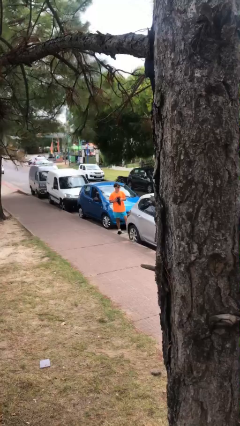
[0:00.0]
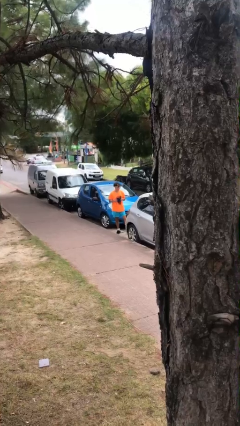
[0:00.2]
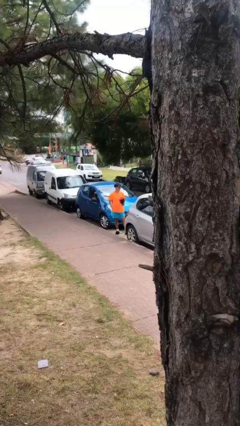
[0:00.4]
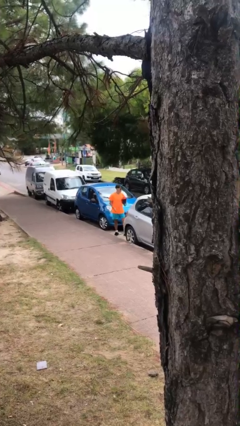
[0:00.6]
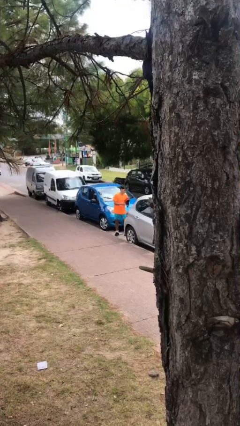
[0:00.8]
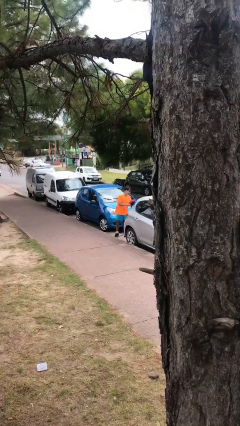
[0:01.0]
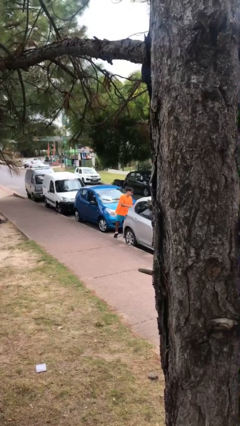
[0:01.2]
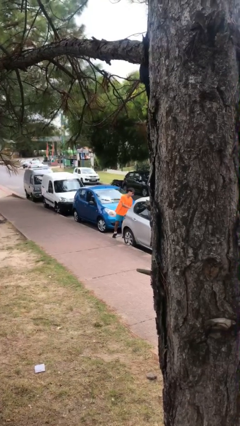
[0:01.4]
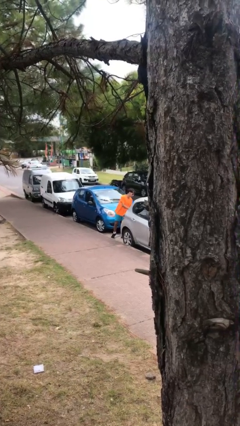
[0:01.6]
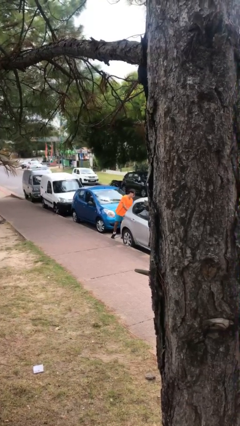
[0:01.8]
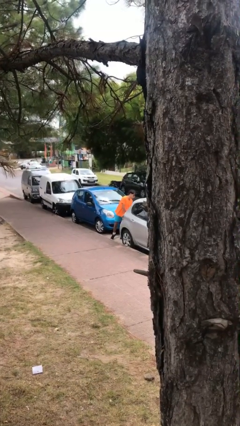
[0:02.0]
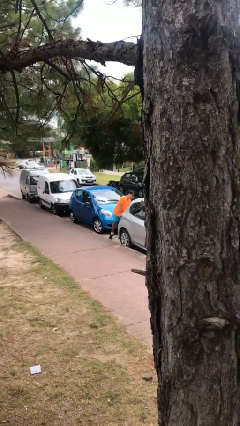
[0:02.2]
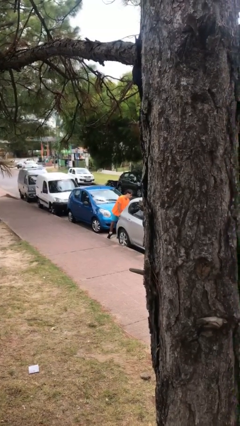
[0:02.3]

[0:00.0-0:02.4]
person loads car

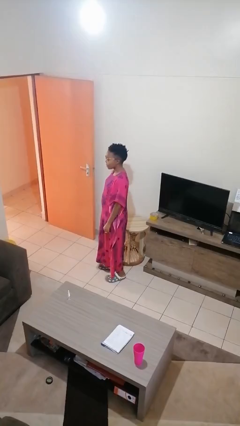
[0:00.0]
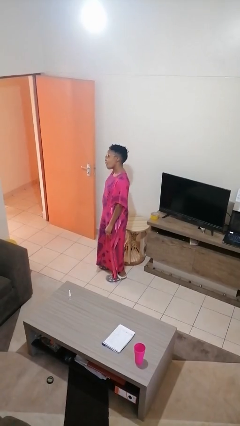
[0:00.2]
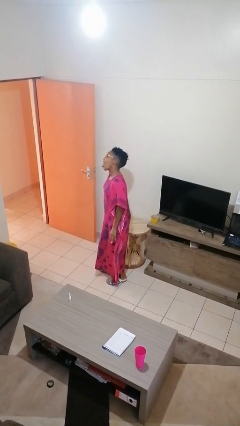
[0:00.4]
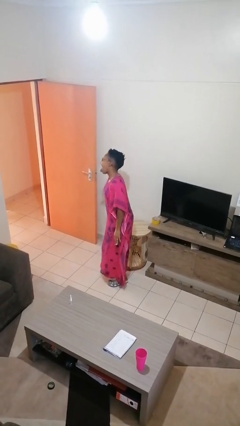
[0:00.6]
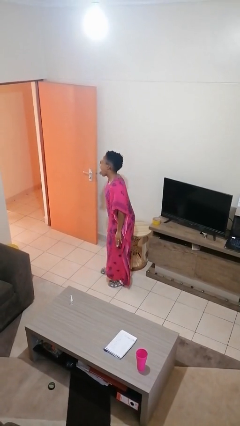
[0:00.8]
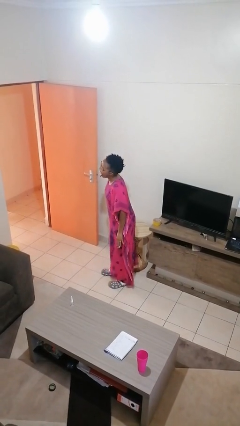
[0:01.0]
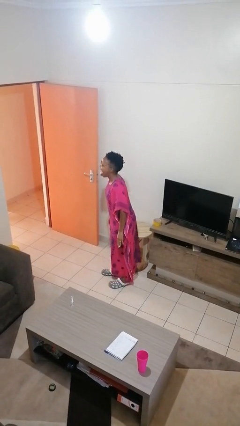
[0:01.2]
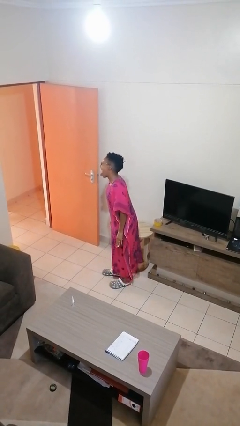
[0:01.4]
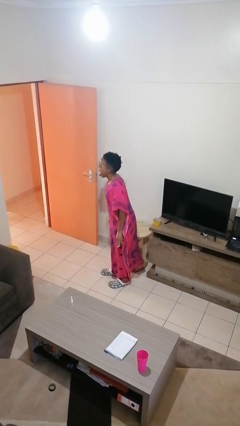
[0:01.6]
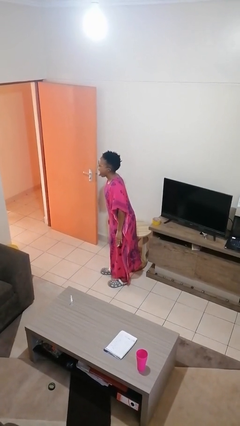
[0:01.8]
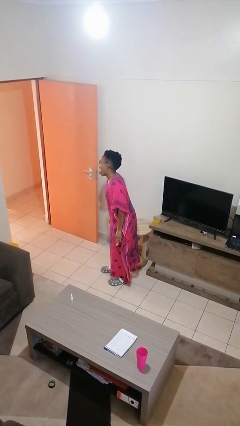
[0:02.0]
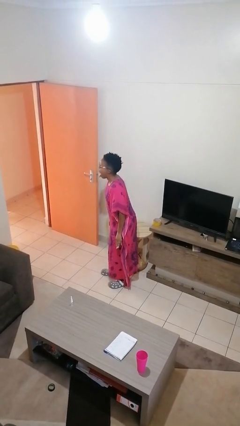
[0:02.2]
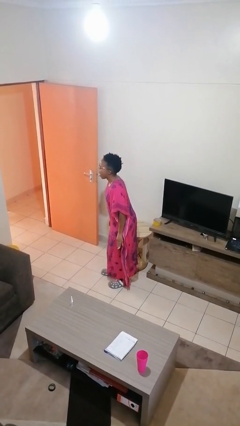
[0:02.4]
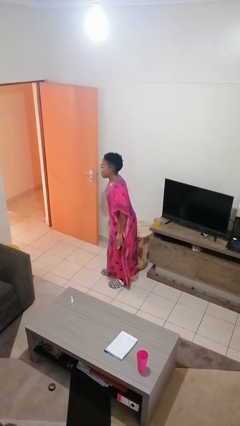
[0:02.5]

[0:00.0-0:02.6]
person sticks out tongue

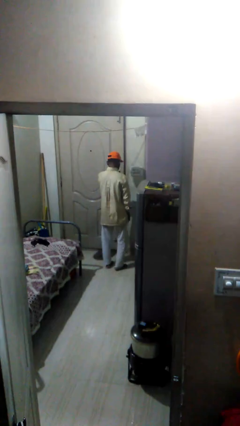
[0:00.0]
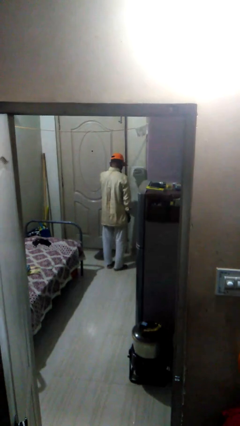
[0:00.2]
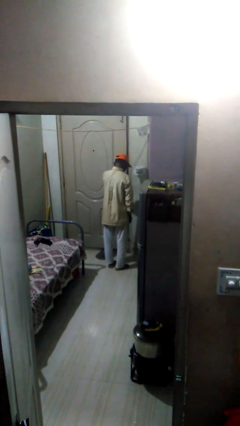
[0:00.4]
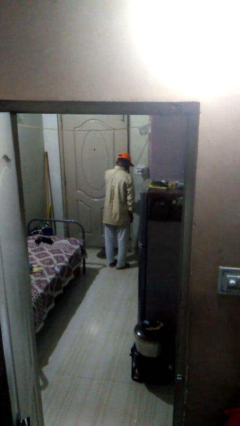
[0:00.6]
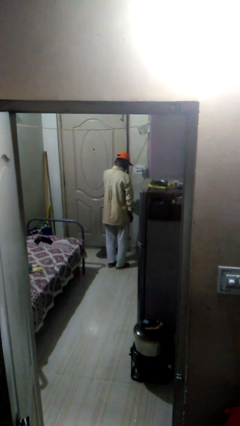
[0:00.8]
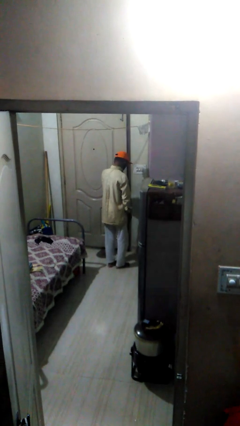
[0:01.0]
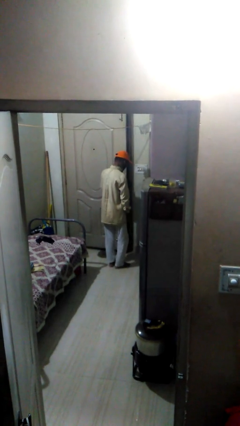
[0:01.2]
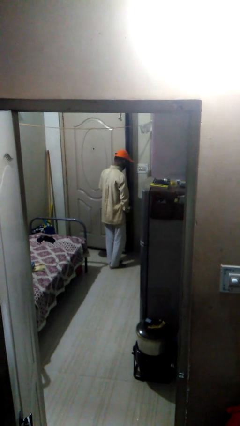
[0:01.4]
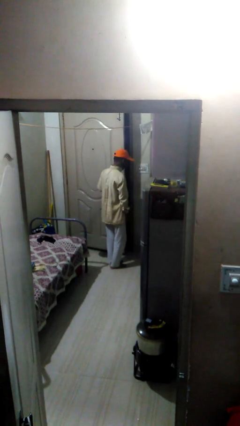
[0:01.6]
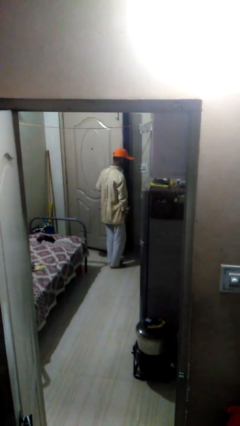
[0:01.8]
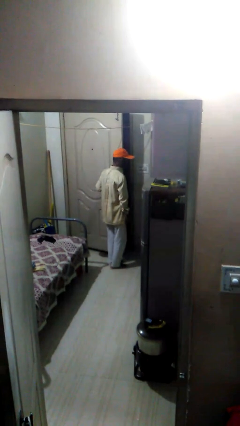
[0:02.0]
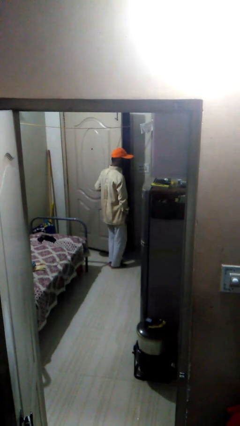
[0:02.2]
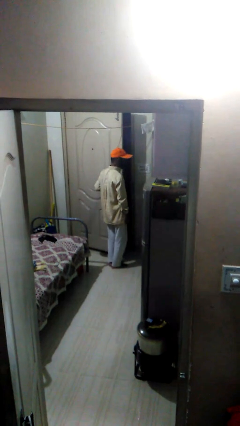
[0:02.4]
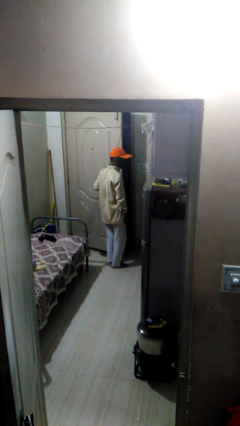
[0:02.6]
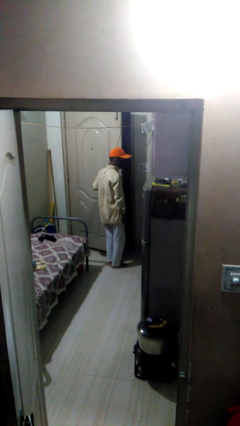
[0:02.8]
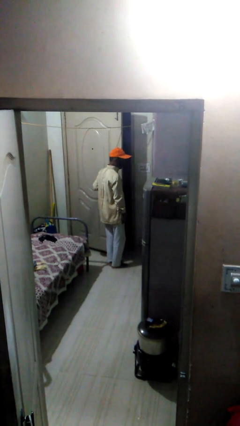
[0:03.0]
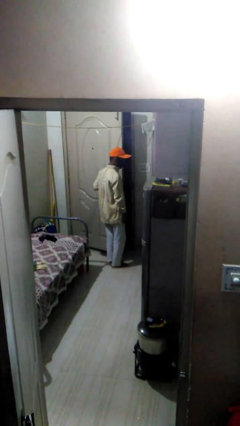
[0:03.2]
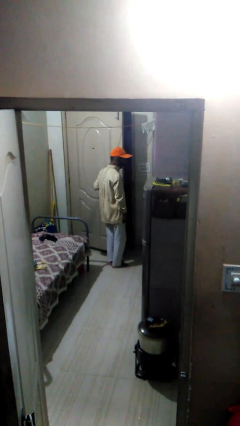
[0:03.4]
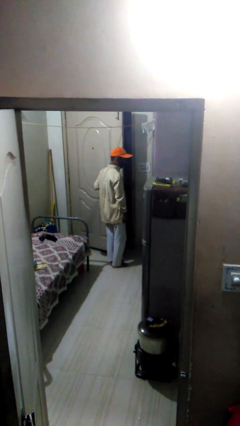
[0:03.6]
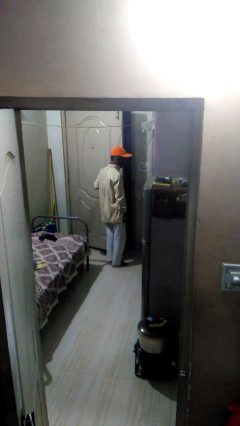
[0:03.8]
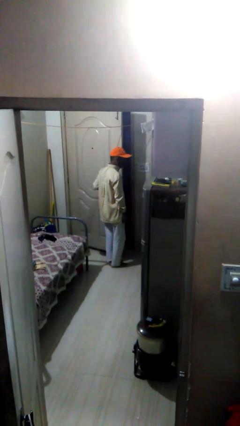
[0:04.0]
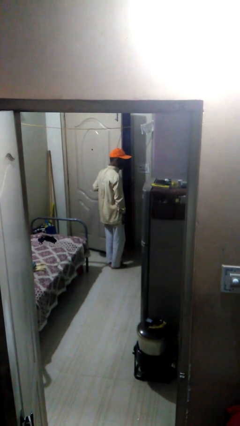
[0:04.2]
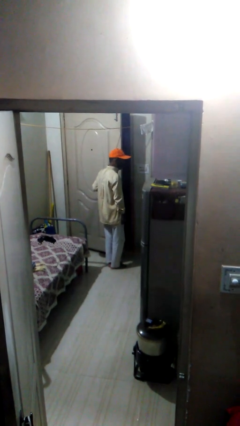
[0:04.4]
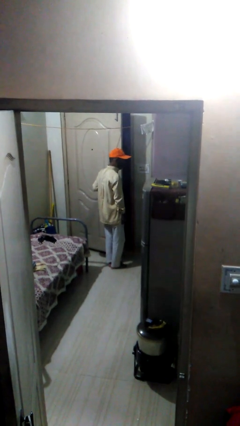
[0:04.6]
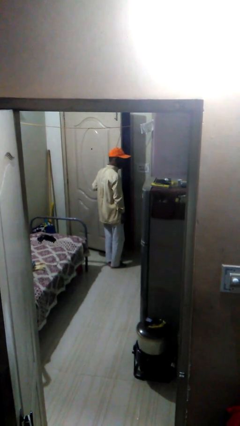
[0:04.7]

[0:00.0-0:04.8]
person opens facility door

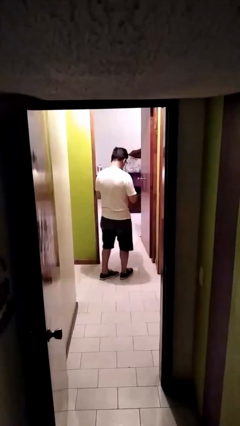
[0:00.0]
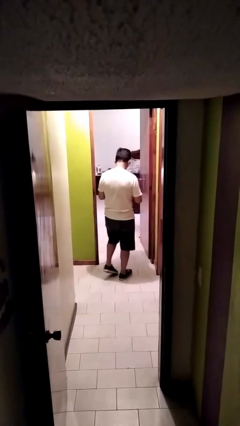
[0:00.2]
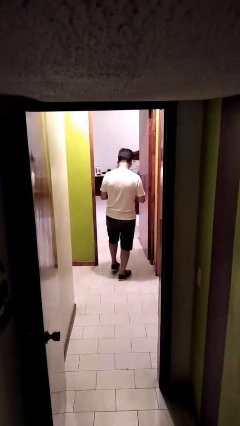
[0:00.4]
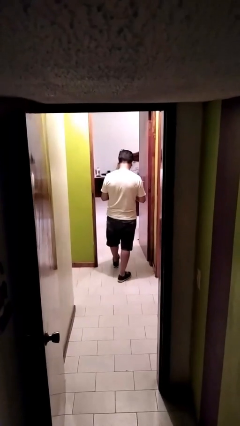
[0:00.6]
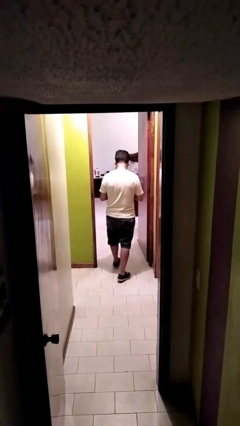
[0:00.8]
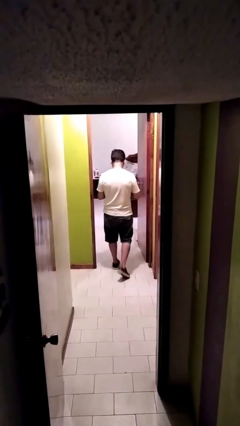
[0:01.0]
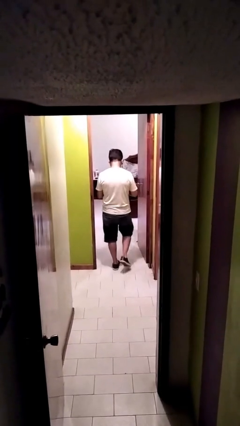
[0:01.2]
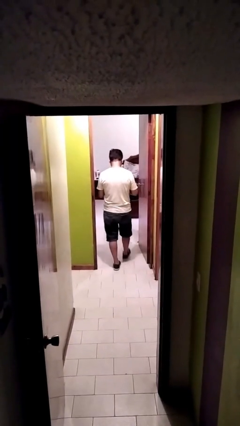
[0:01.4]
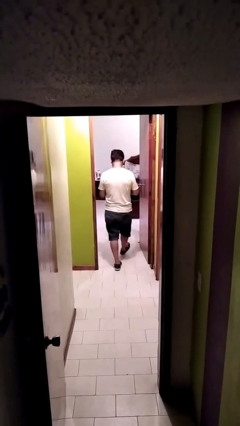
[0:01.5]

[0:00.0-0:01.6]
person exits scene through structure

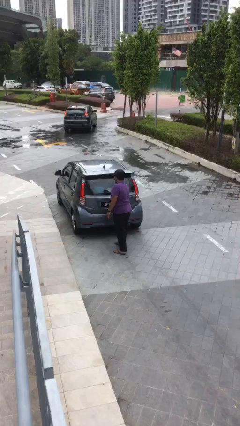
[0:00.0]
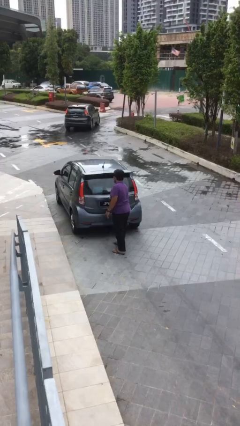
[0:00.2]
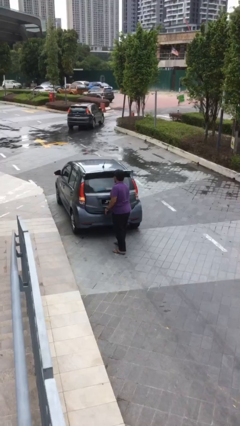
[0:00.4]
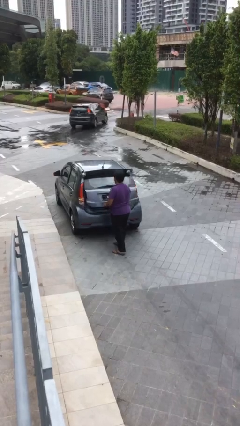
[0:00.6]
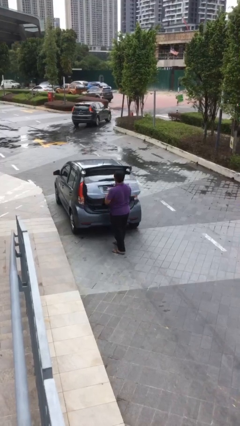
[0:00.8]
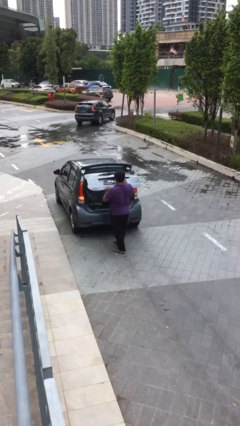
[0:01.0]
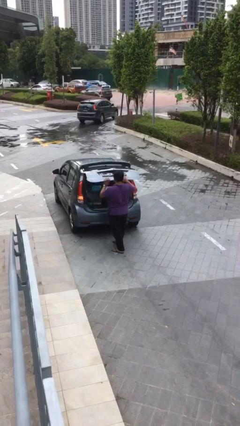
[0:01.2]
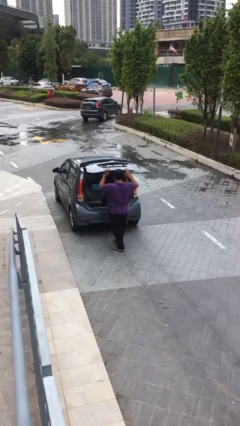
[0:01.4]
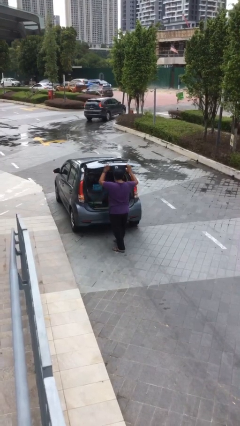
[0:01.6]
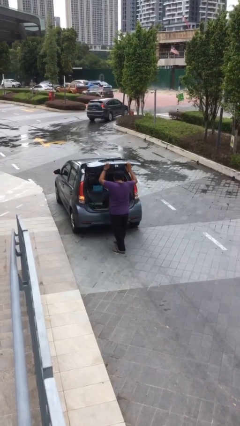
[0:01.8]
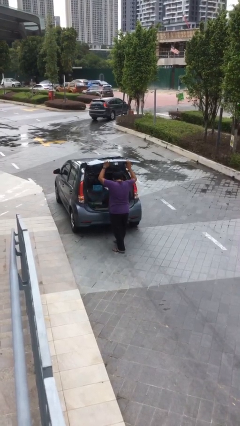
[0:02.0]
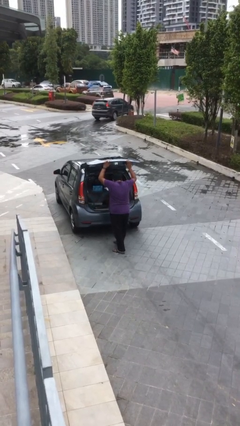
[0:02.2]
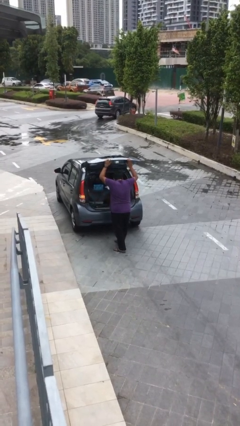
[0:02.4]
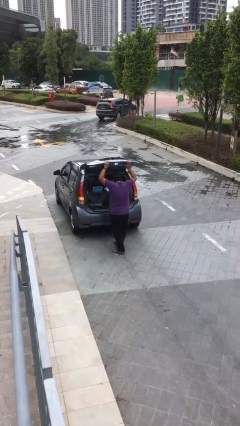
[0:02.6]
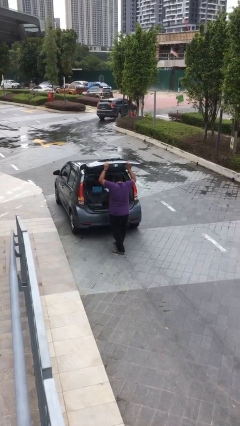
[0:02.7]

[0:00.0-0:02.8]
person opens car trunk

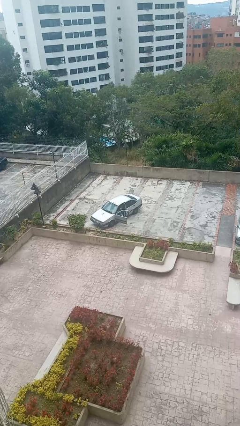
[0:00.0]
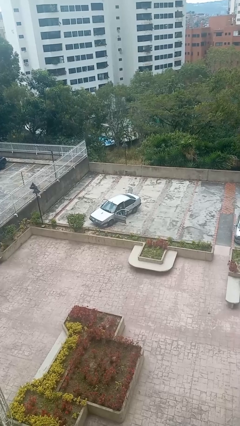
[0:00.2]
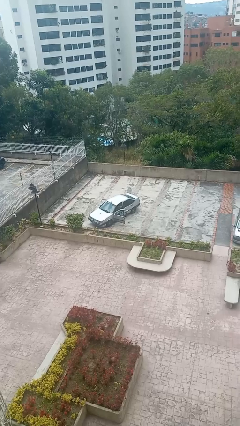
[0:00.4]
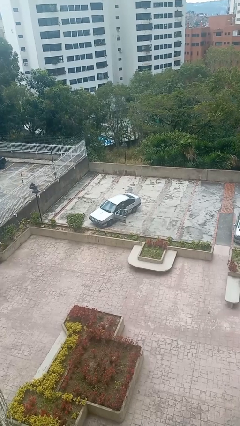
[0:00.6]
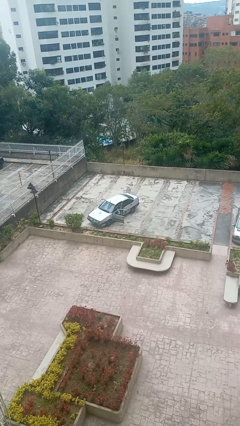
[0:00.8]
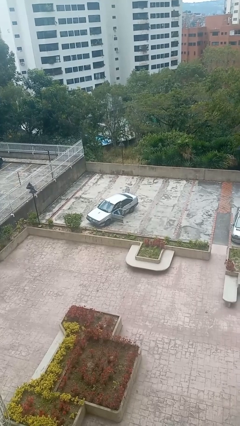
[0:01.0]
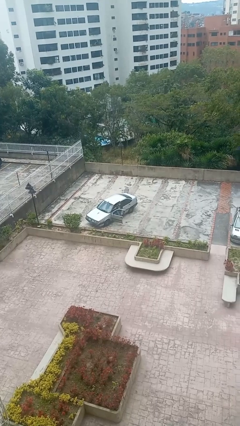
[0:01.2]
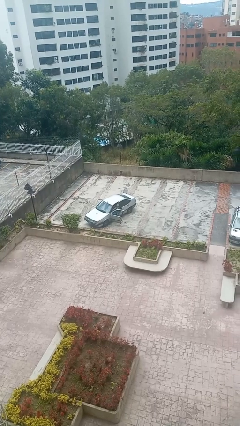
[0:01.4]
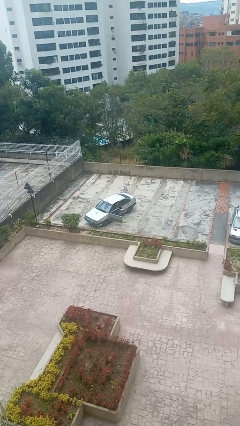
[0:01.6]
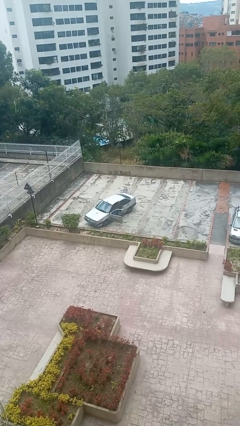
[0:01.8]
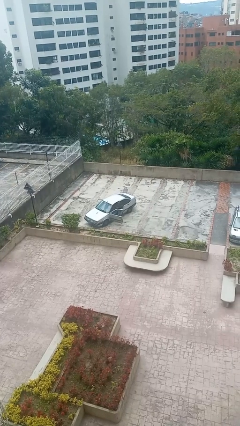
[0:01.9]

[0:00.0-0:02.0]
person exits car

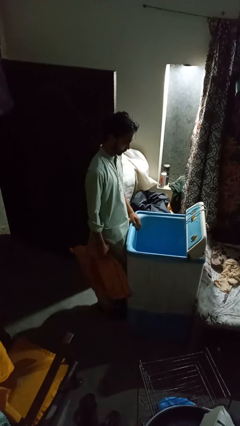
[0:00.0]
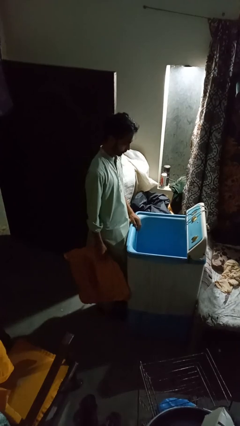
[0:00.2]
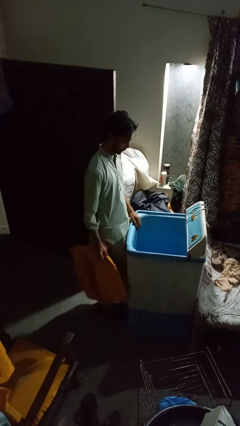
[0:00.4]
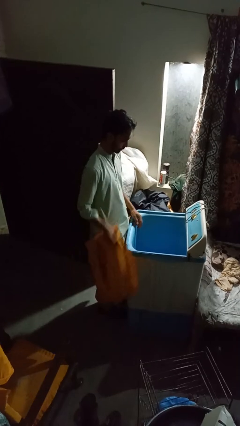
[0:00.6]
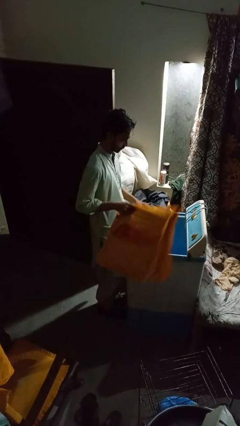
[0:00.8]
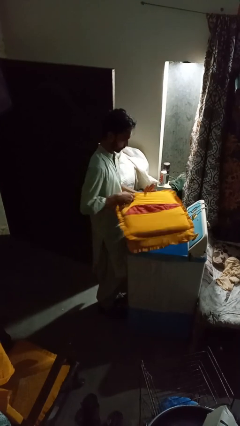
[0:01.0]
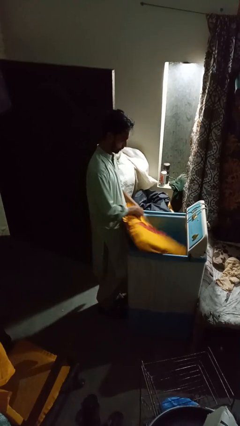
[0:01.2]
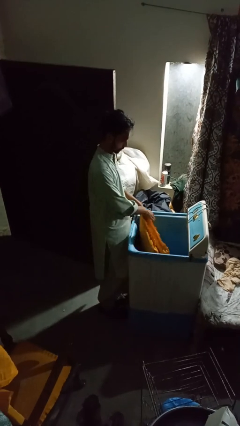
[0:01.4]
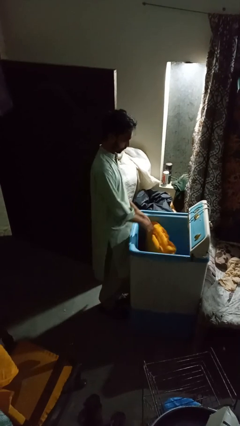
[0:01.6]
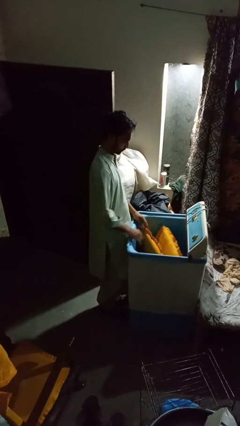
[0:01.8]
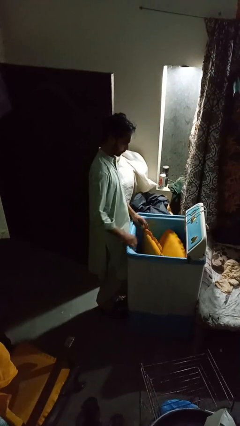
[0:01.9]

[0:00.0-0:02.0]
person loads clotheswasher
